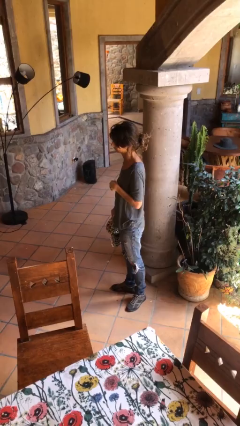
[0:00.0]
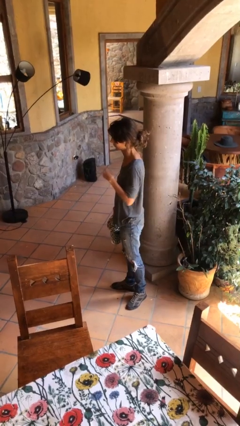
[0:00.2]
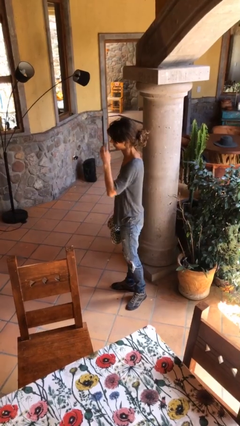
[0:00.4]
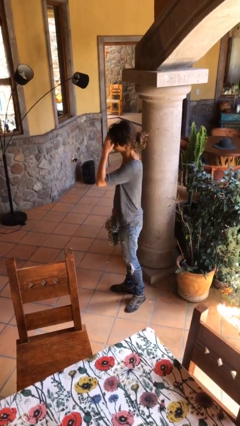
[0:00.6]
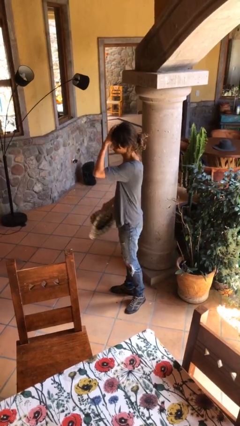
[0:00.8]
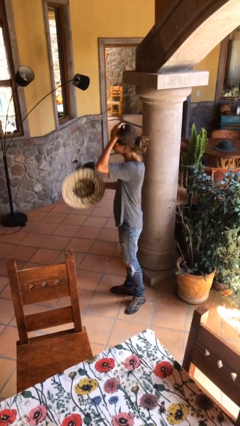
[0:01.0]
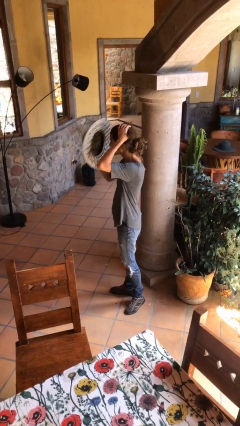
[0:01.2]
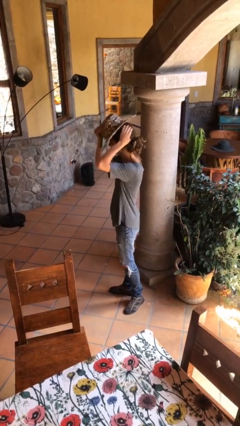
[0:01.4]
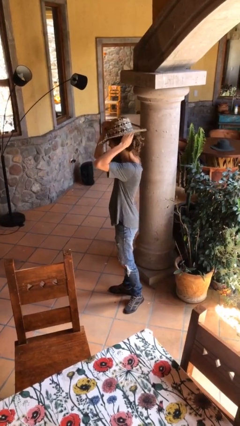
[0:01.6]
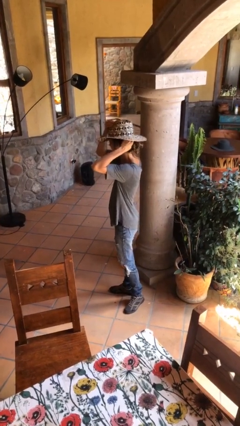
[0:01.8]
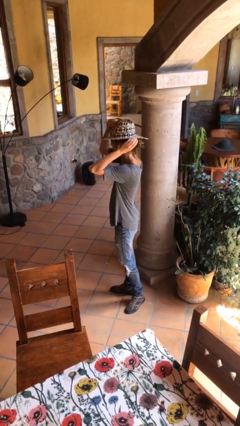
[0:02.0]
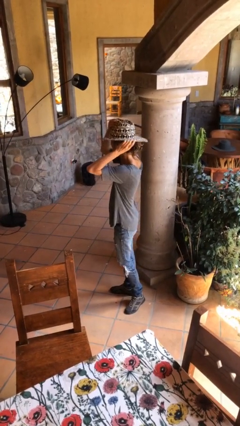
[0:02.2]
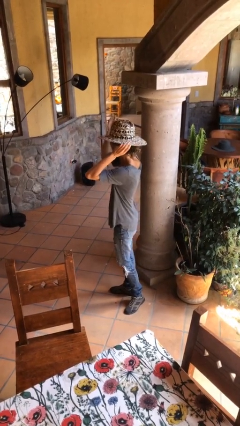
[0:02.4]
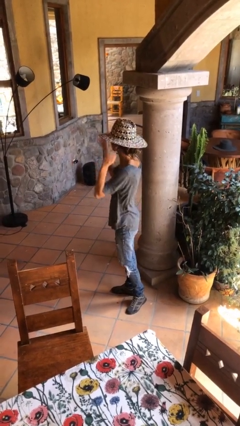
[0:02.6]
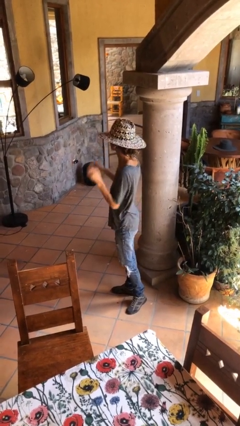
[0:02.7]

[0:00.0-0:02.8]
person puts on hat

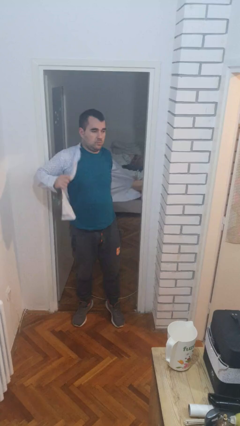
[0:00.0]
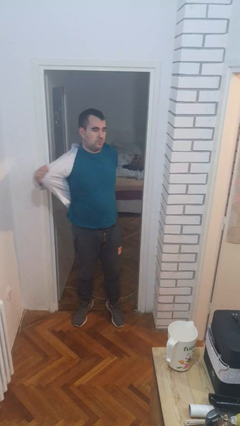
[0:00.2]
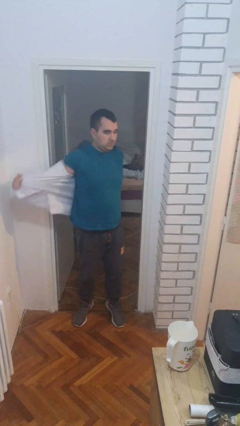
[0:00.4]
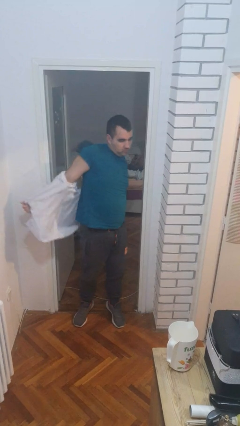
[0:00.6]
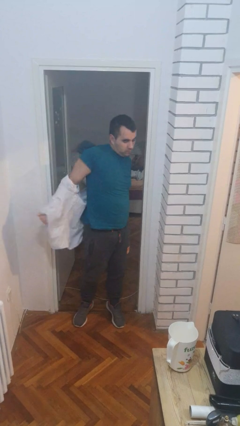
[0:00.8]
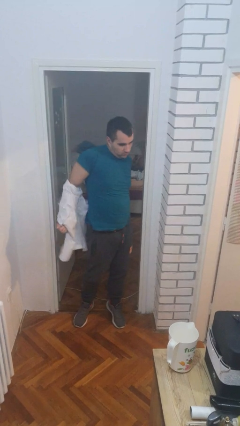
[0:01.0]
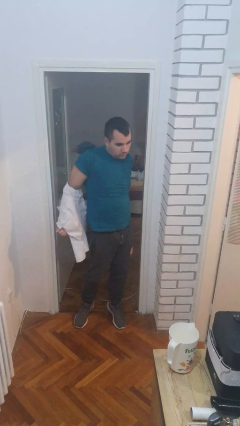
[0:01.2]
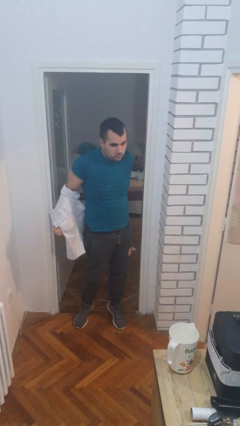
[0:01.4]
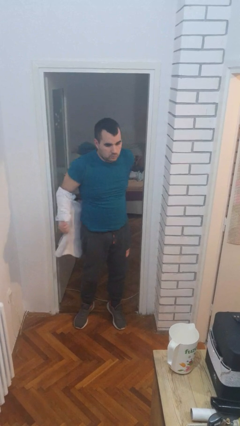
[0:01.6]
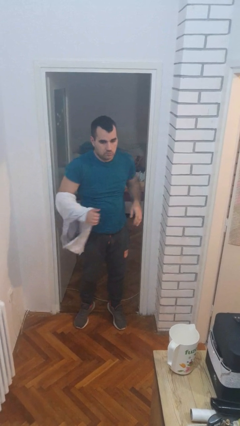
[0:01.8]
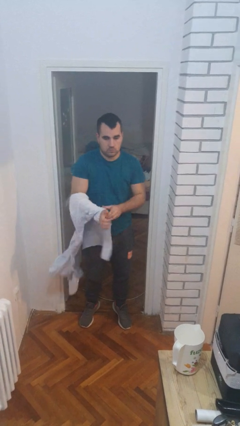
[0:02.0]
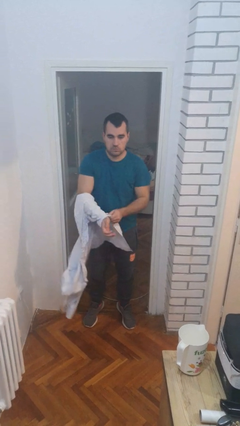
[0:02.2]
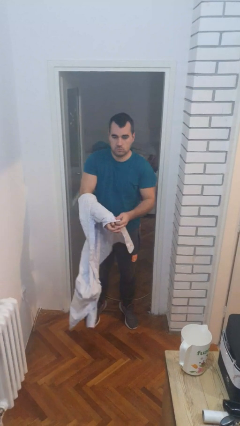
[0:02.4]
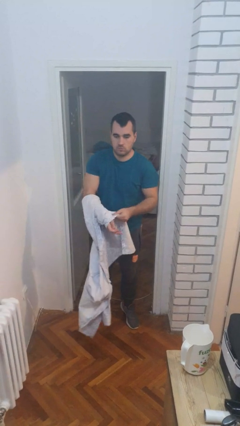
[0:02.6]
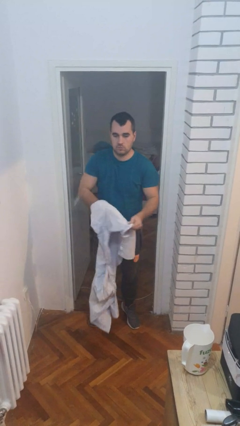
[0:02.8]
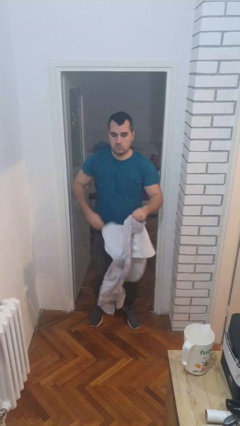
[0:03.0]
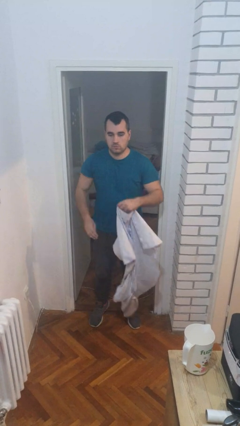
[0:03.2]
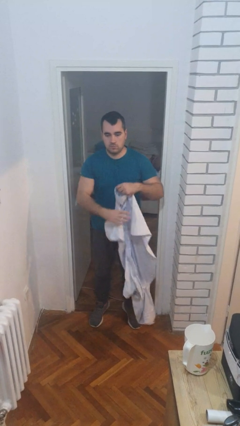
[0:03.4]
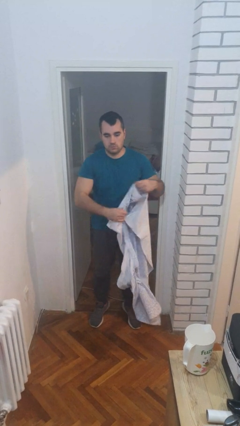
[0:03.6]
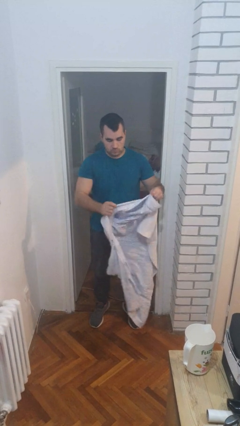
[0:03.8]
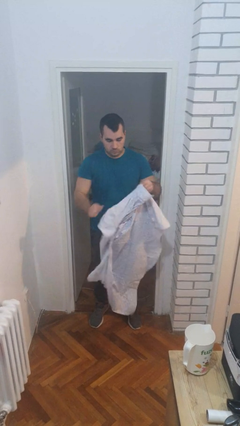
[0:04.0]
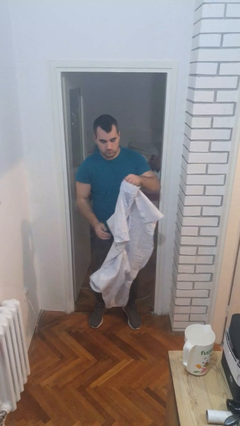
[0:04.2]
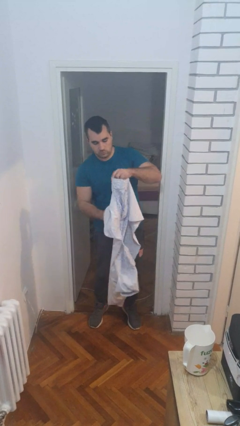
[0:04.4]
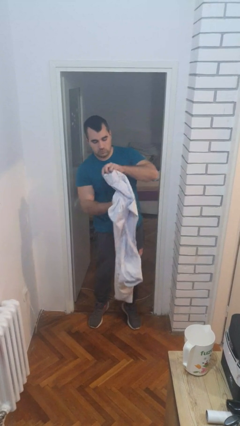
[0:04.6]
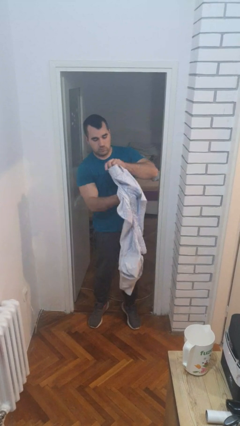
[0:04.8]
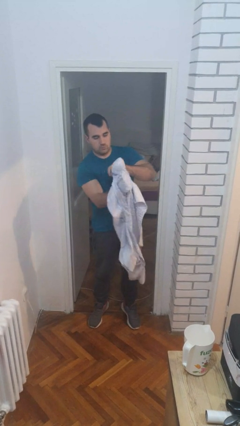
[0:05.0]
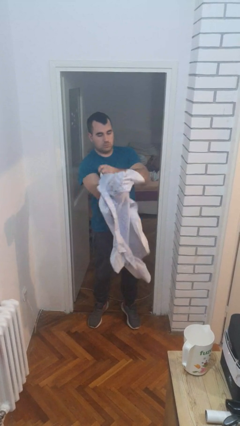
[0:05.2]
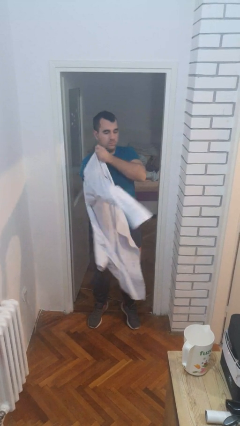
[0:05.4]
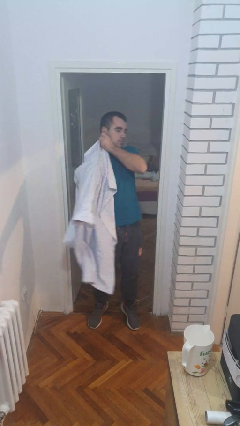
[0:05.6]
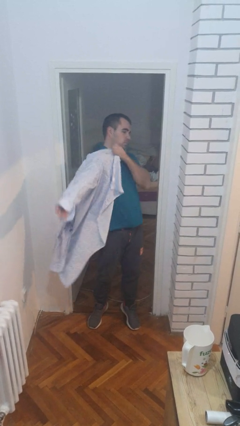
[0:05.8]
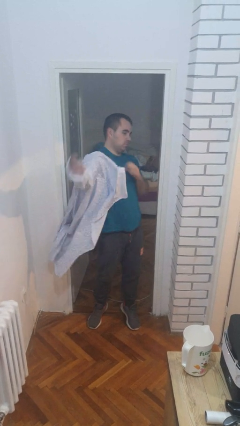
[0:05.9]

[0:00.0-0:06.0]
person takes off shirt

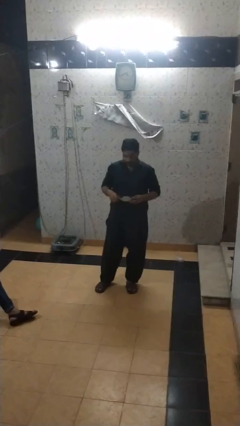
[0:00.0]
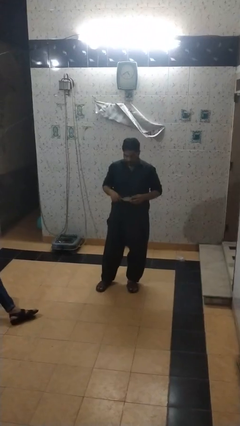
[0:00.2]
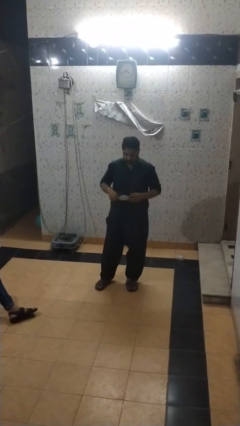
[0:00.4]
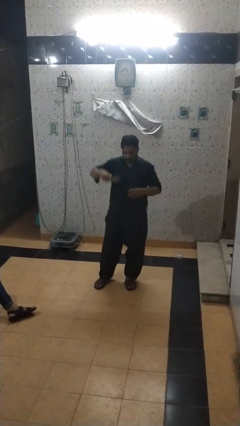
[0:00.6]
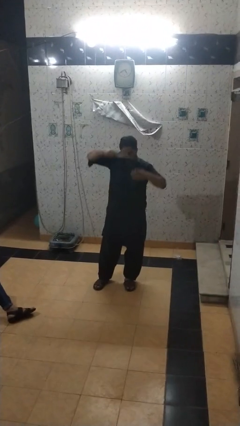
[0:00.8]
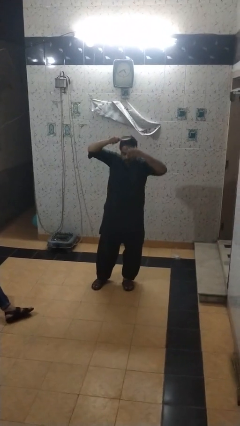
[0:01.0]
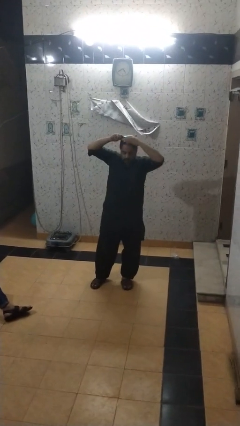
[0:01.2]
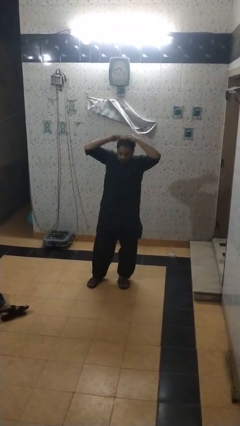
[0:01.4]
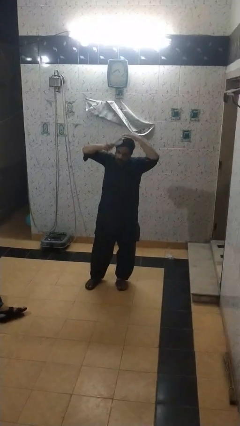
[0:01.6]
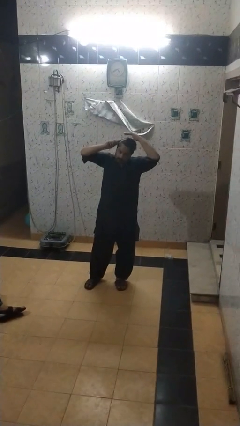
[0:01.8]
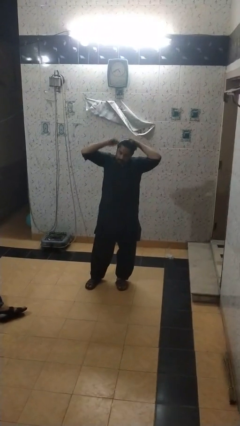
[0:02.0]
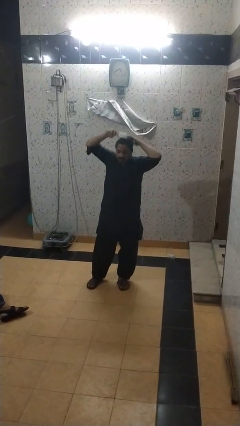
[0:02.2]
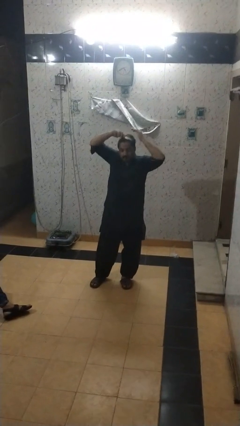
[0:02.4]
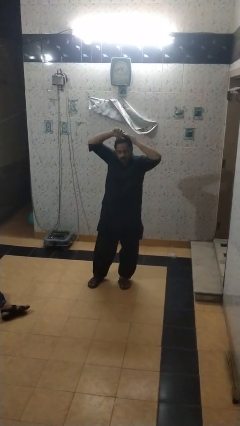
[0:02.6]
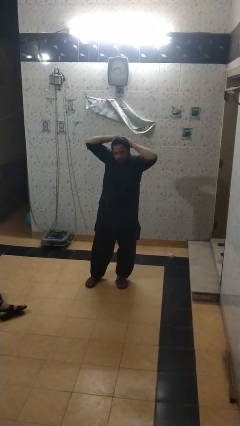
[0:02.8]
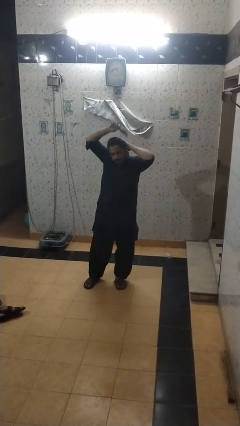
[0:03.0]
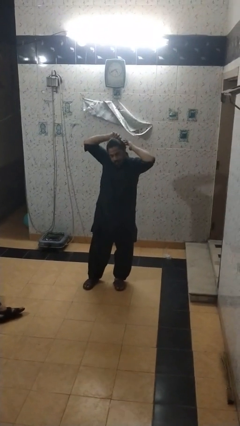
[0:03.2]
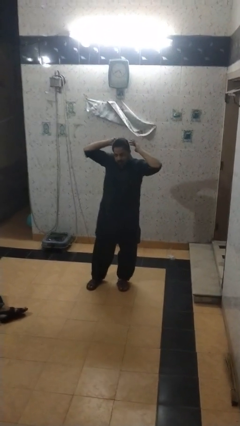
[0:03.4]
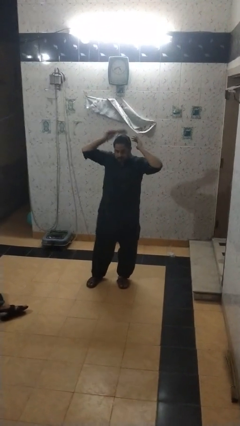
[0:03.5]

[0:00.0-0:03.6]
person brushes hair

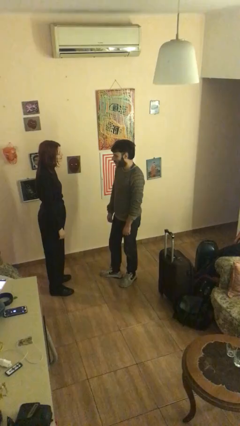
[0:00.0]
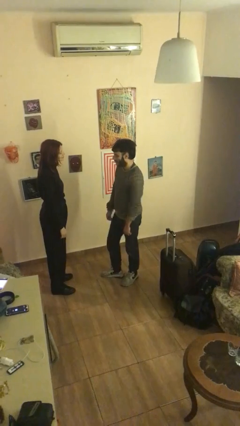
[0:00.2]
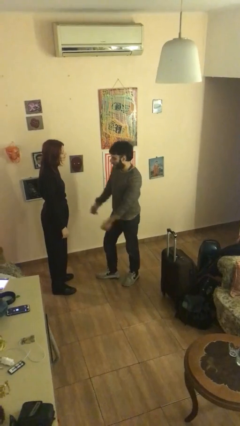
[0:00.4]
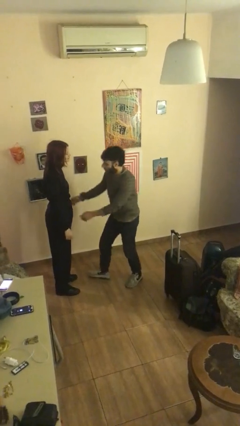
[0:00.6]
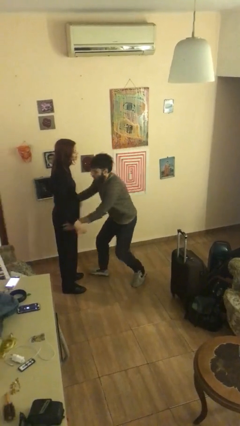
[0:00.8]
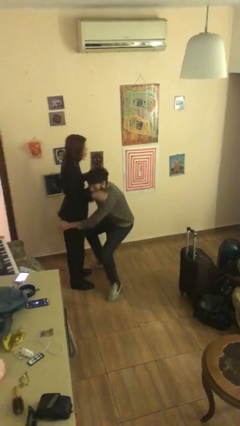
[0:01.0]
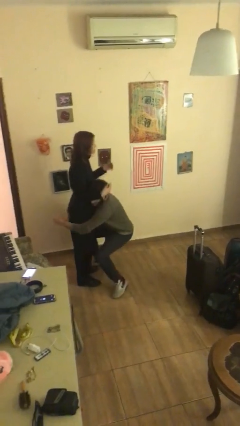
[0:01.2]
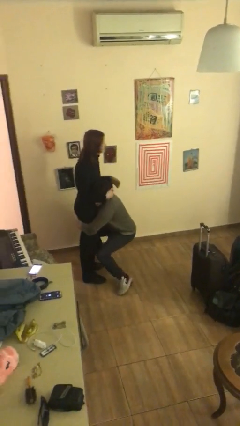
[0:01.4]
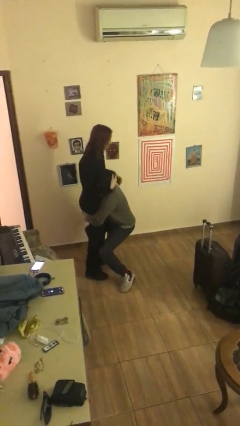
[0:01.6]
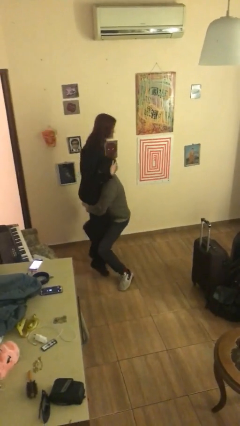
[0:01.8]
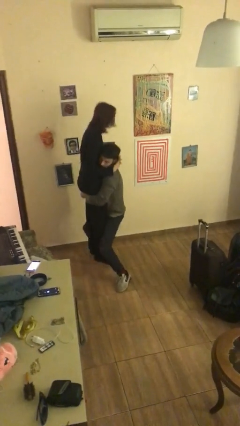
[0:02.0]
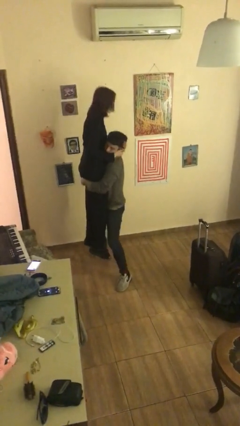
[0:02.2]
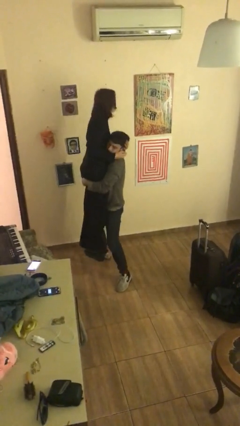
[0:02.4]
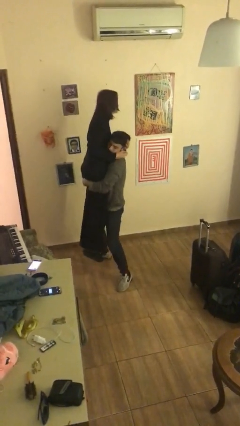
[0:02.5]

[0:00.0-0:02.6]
person picks up person

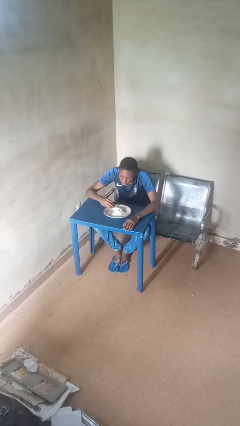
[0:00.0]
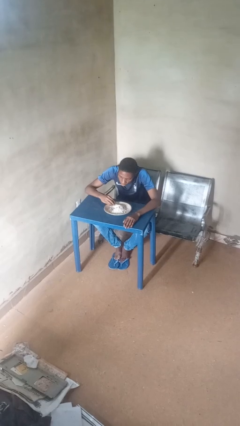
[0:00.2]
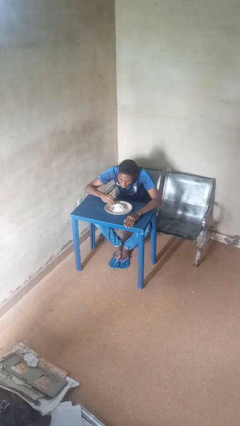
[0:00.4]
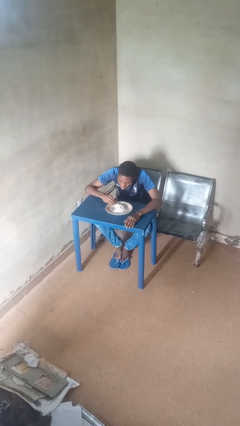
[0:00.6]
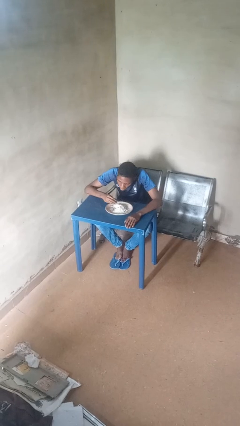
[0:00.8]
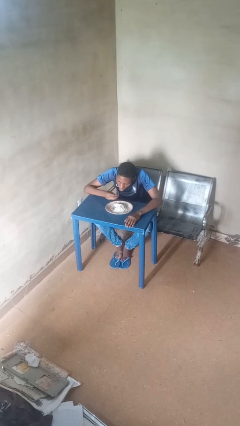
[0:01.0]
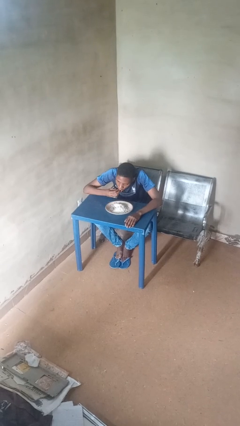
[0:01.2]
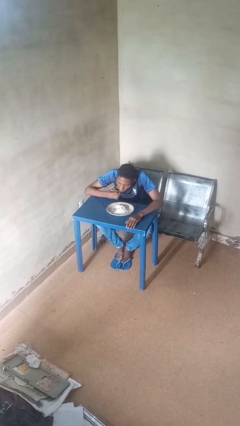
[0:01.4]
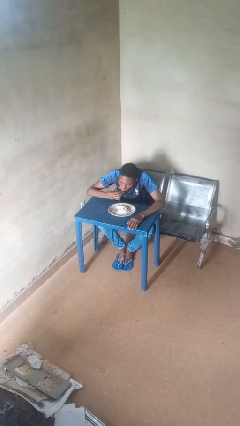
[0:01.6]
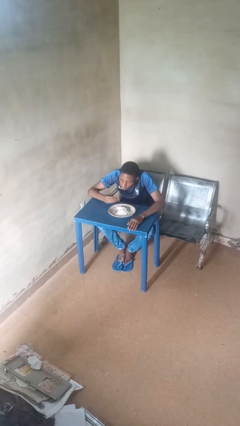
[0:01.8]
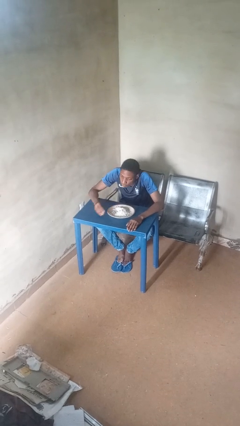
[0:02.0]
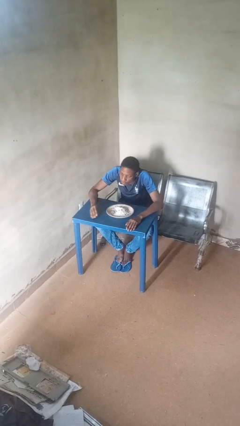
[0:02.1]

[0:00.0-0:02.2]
person eats with hands
